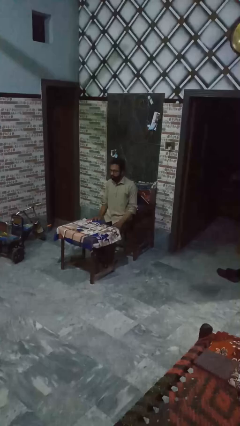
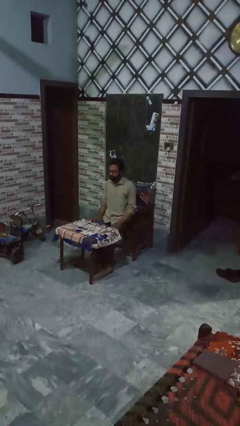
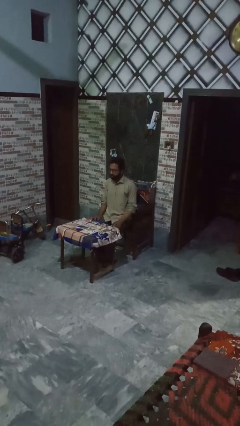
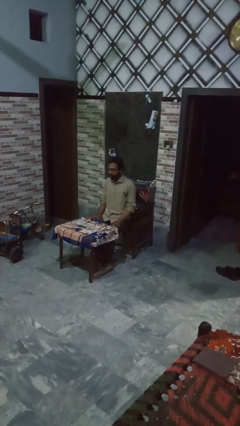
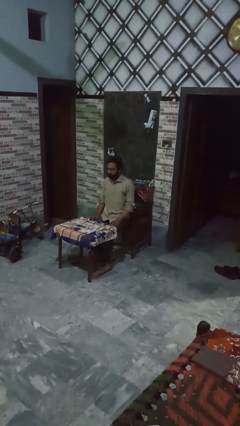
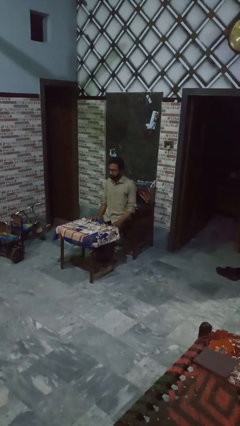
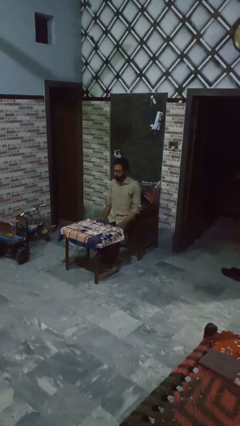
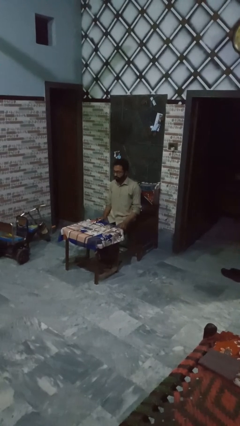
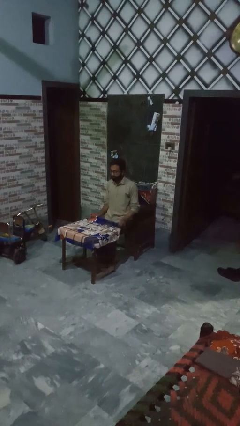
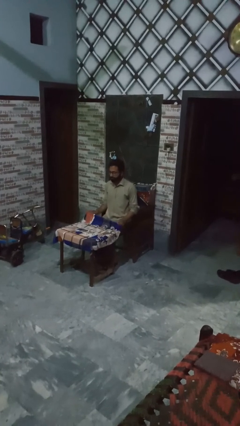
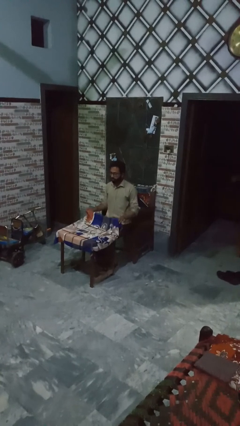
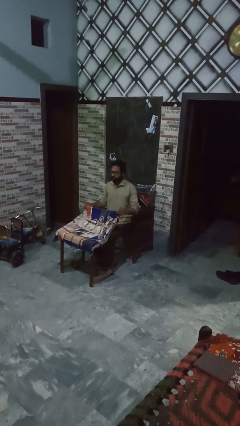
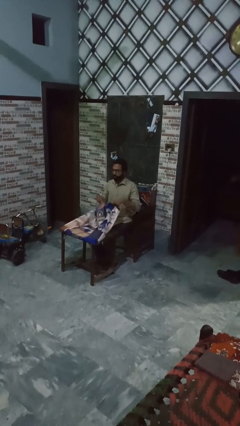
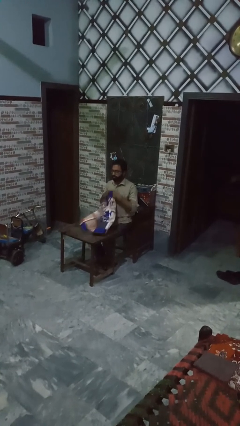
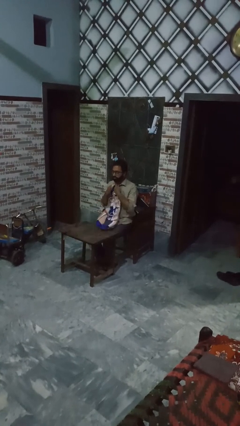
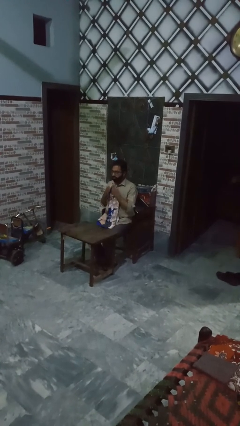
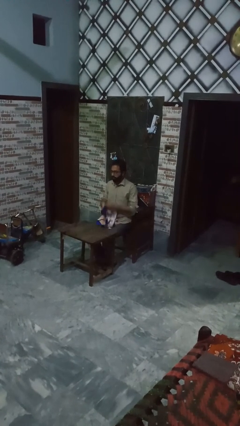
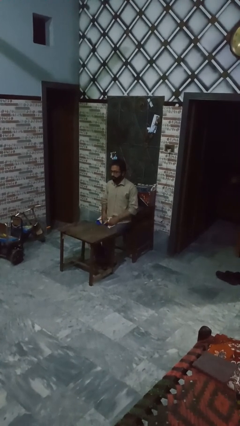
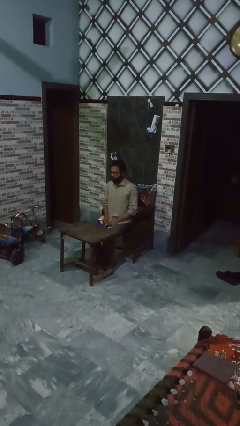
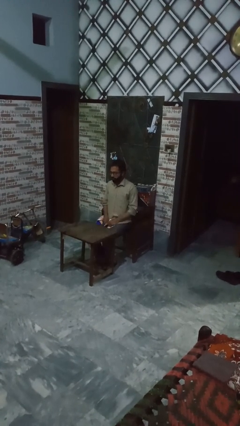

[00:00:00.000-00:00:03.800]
person spreads tablecloth

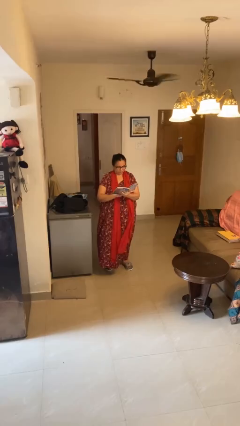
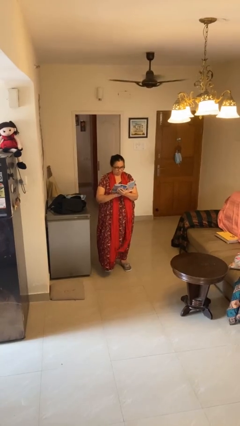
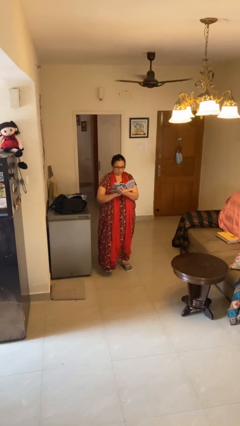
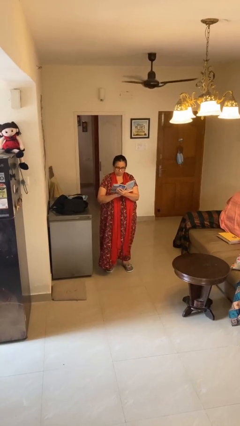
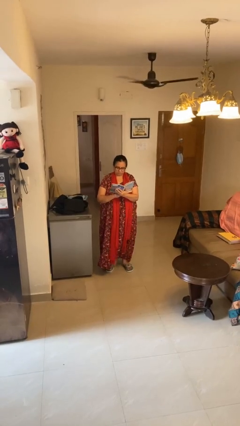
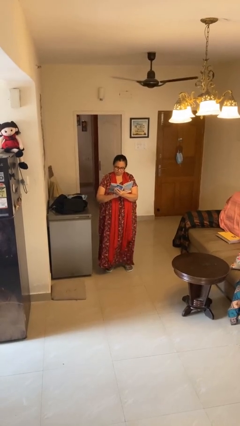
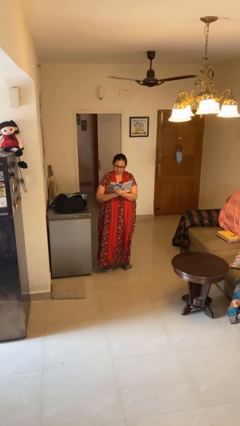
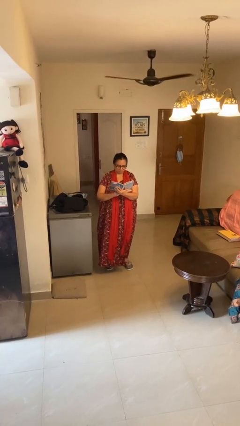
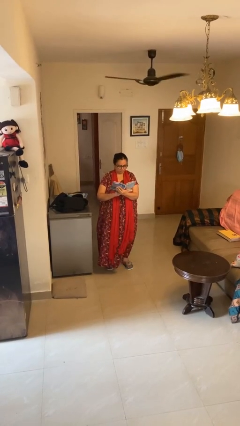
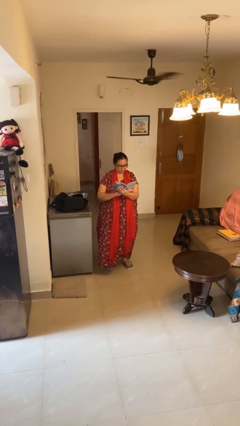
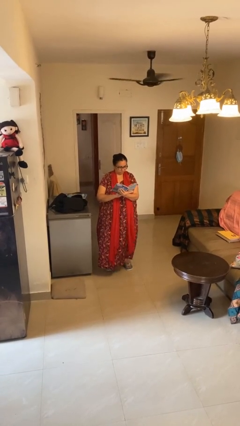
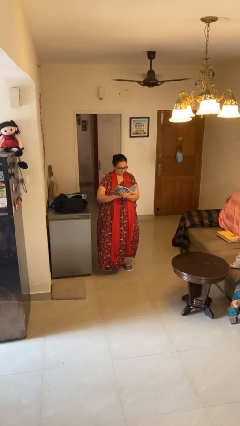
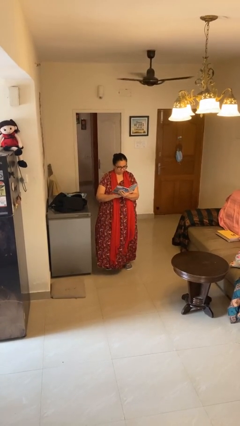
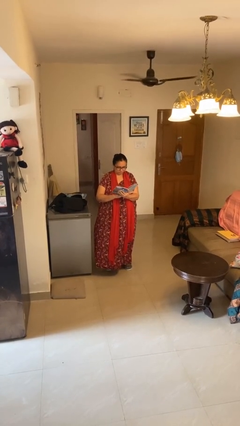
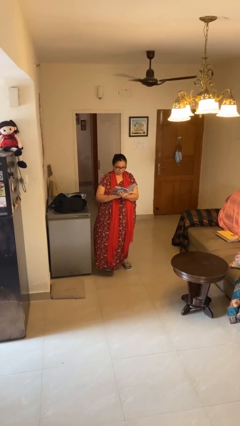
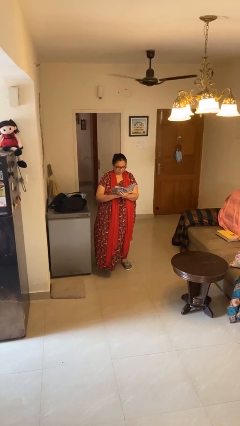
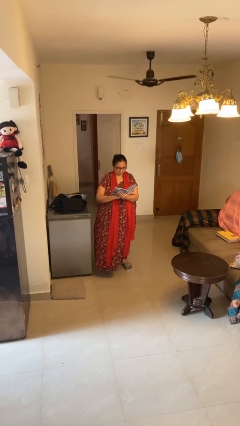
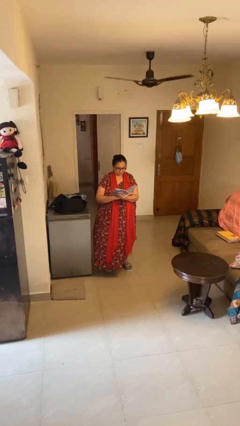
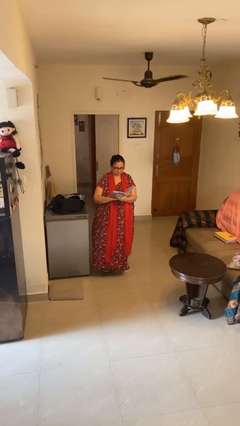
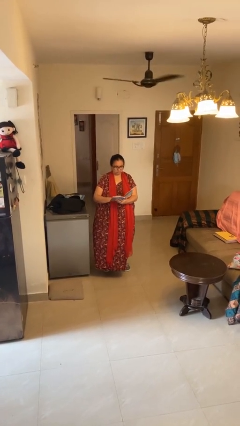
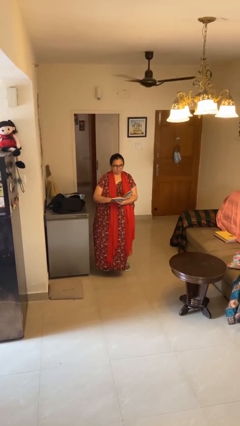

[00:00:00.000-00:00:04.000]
person reads document

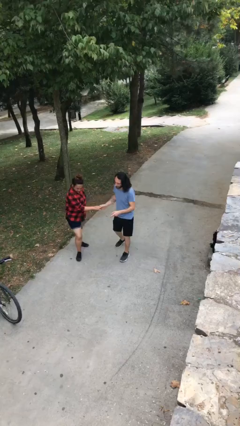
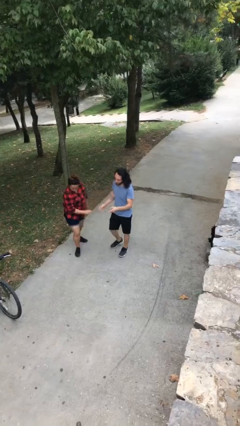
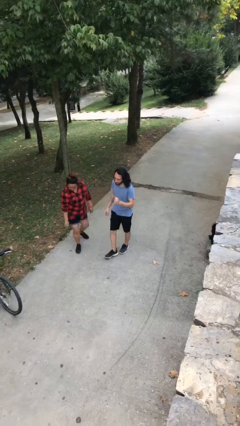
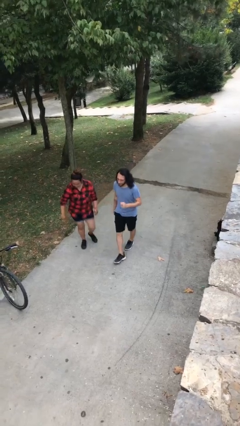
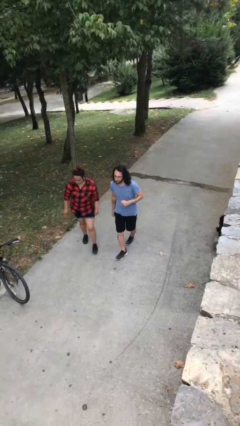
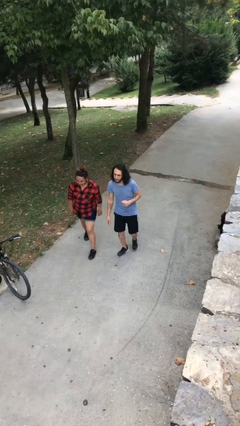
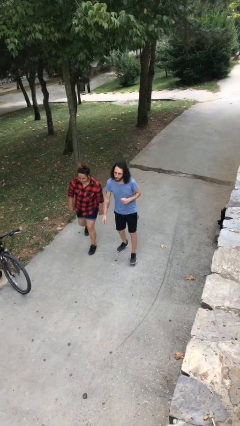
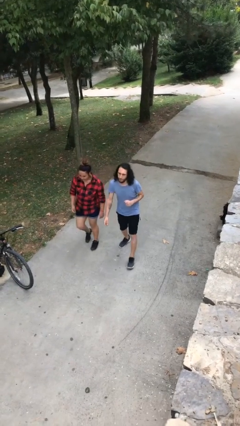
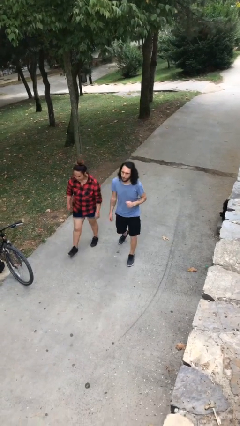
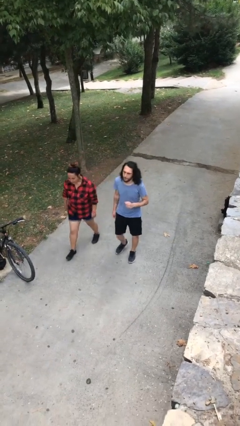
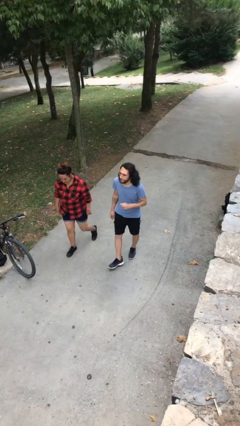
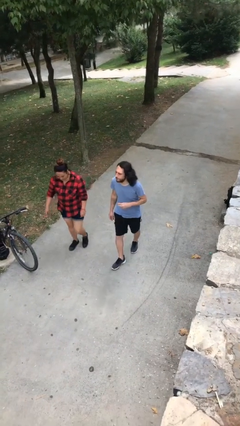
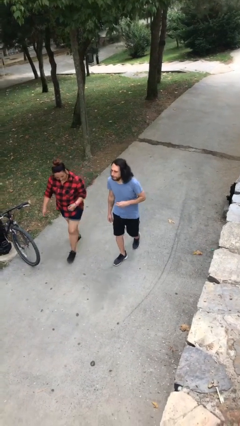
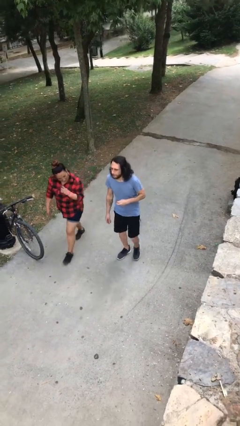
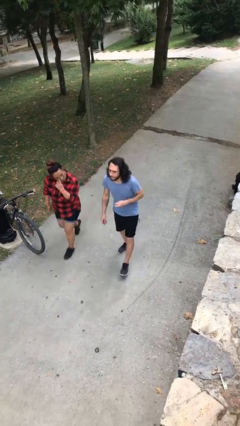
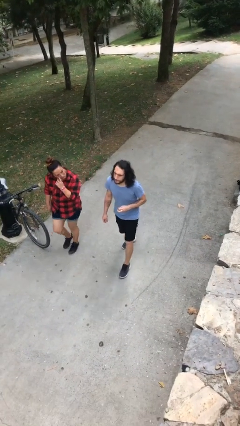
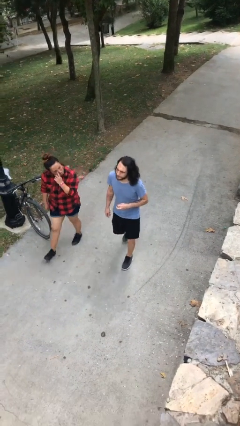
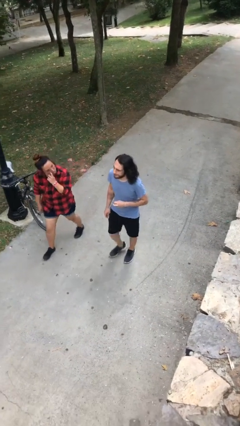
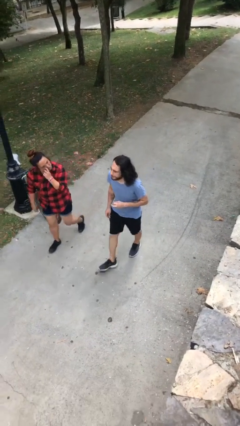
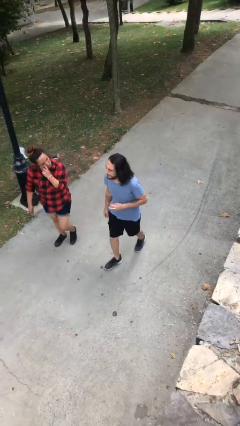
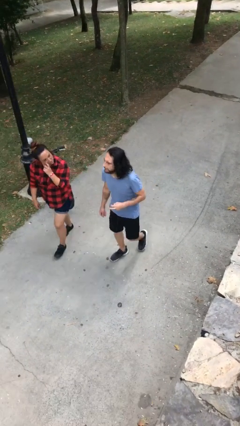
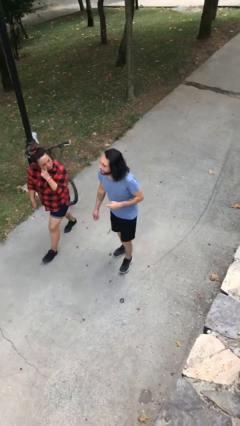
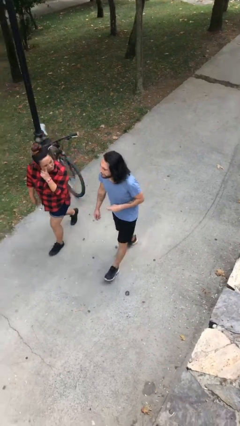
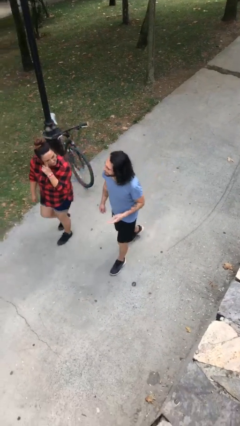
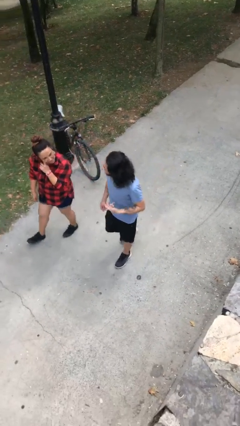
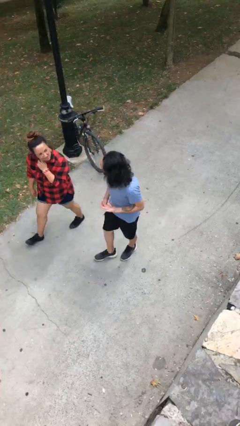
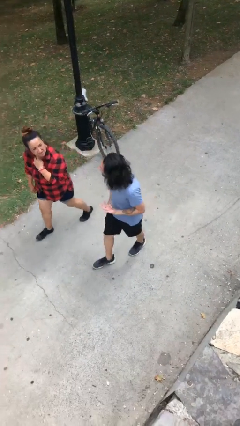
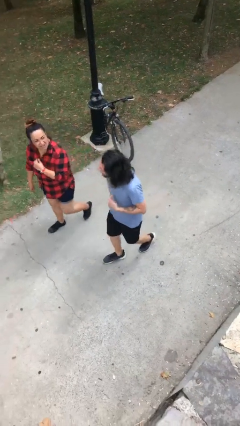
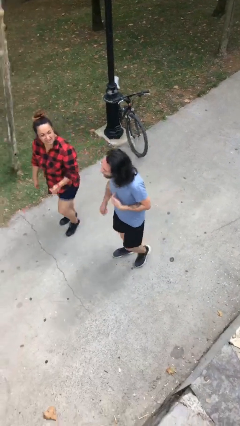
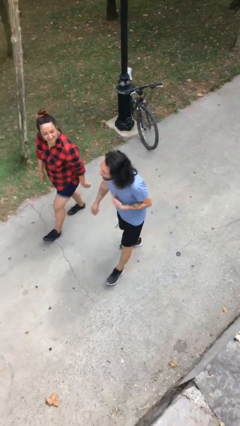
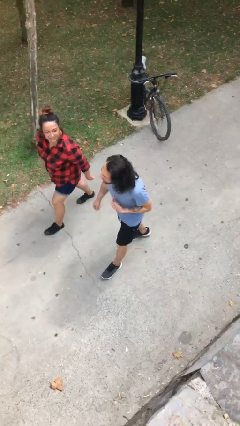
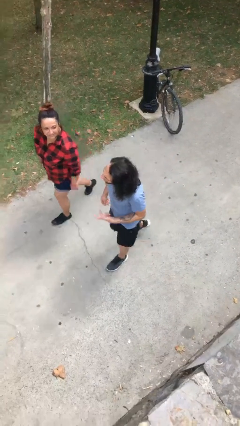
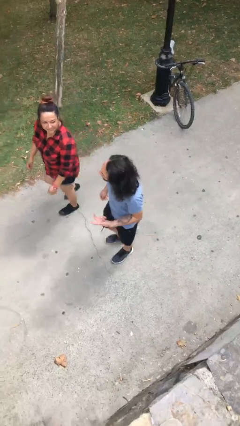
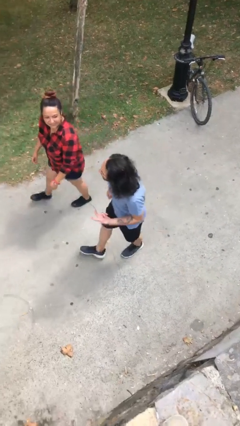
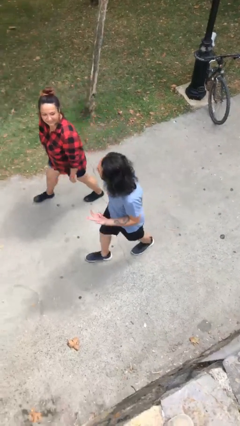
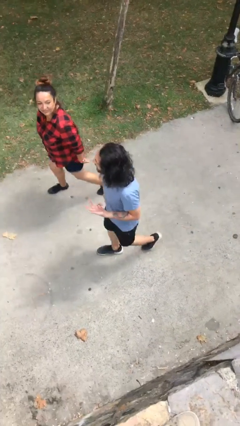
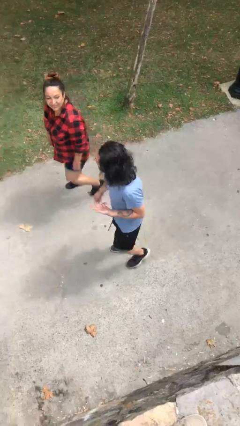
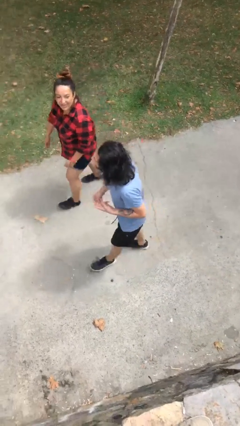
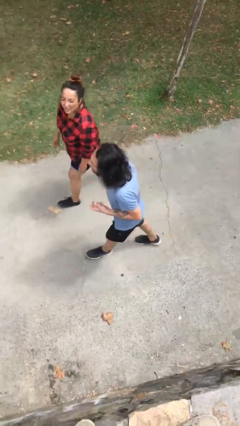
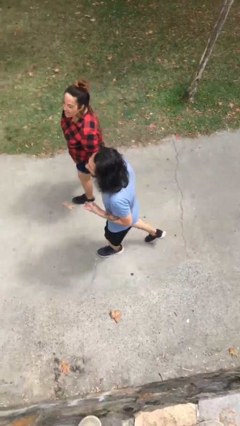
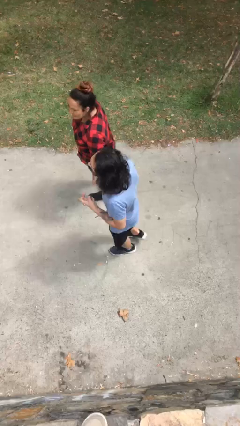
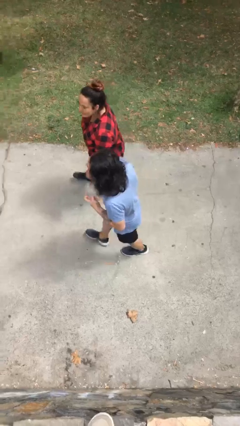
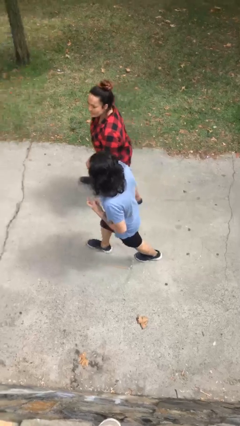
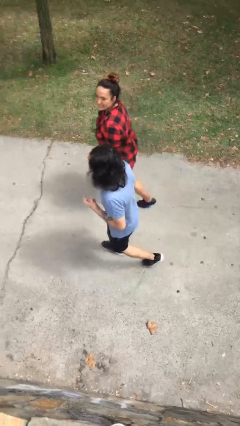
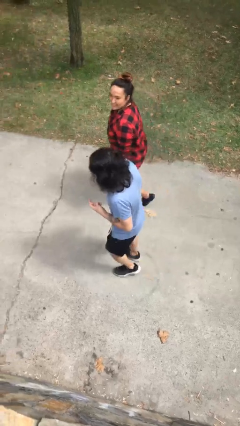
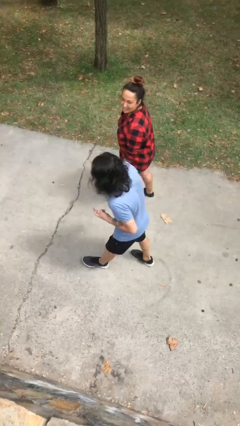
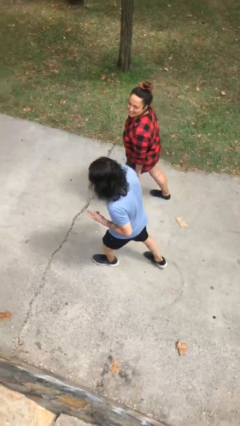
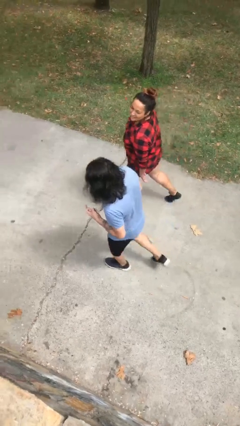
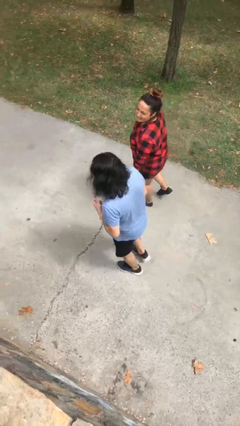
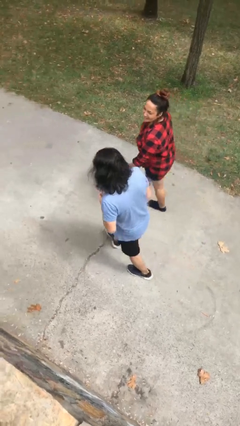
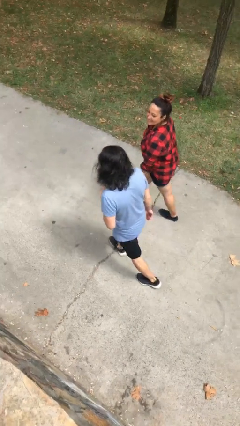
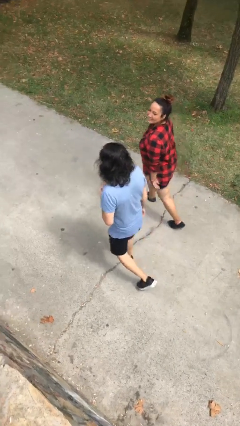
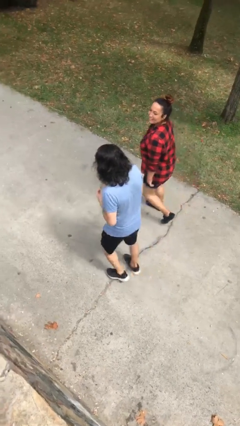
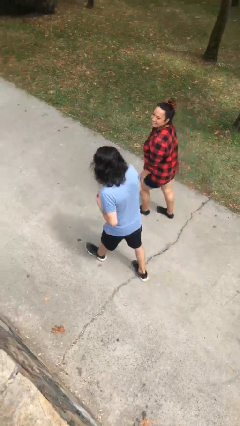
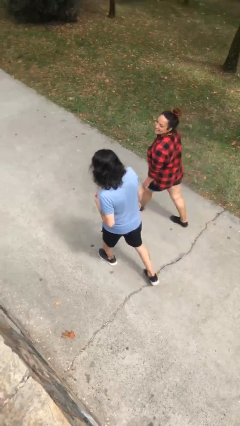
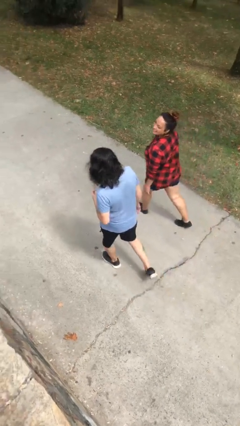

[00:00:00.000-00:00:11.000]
person talks to person
